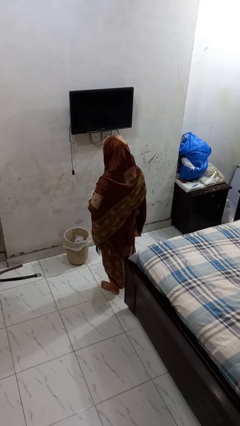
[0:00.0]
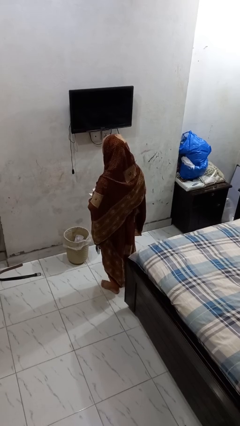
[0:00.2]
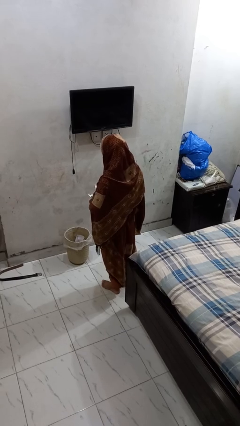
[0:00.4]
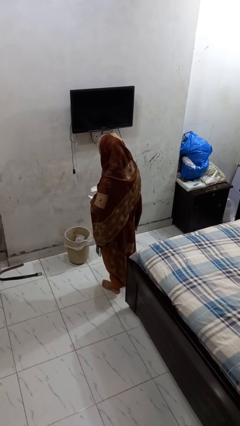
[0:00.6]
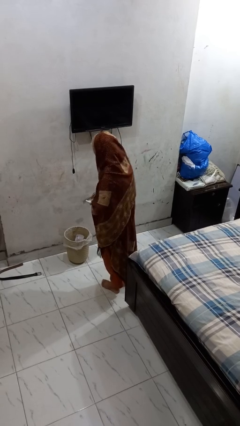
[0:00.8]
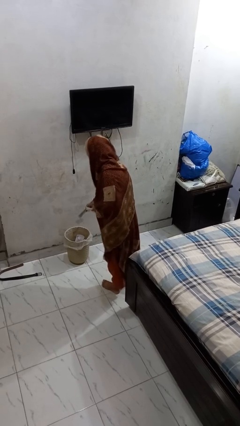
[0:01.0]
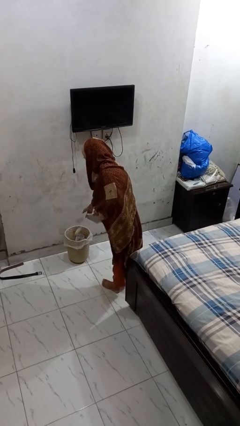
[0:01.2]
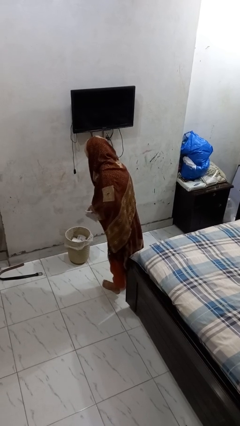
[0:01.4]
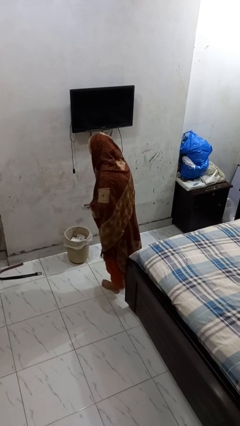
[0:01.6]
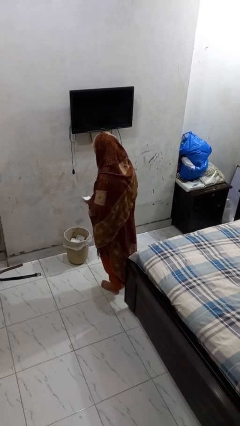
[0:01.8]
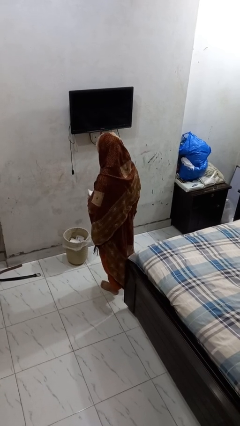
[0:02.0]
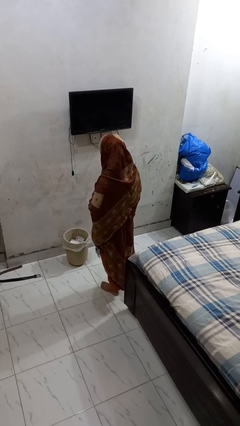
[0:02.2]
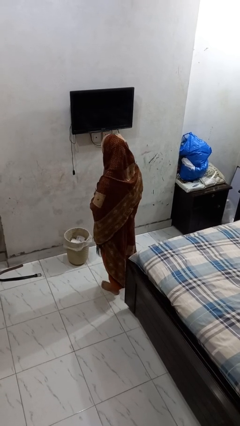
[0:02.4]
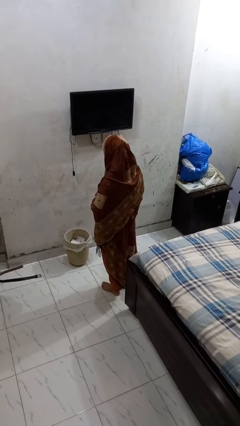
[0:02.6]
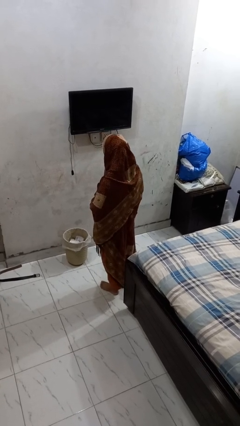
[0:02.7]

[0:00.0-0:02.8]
person discards trash

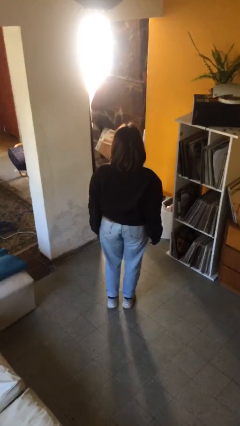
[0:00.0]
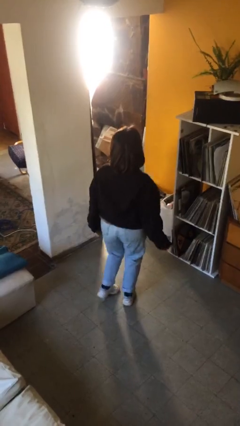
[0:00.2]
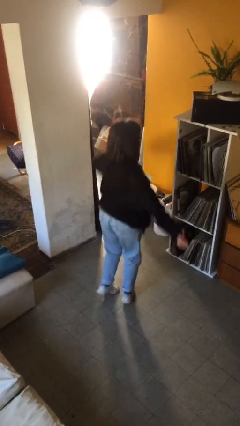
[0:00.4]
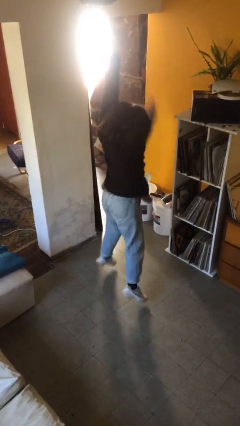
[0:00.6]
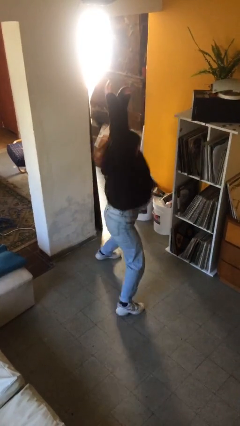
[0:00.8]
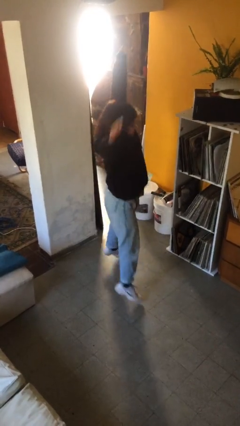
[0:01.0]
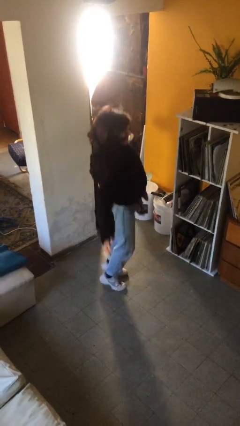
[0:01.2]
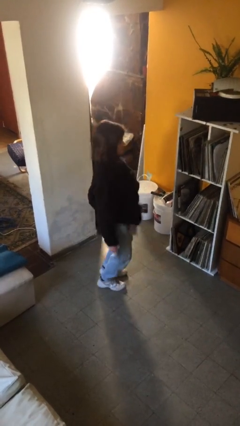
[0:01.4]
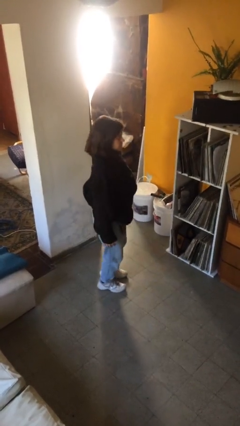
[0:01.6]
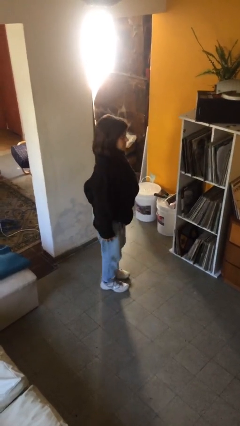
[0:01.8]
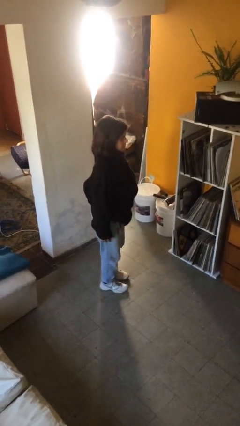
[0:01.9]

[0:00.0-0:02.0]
person exercises with jumping jacks

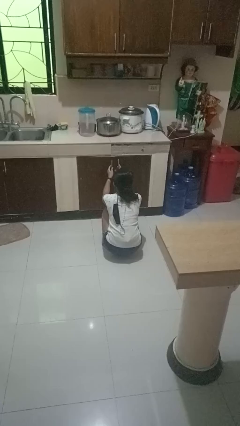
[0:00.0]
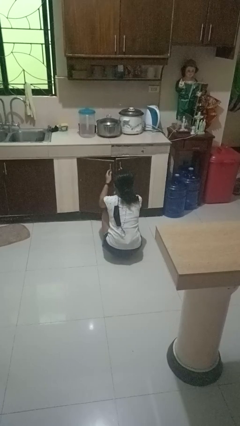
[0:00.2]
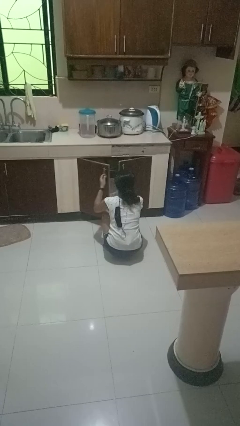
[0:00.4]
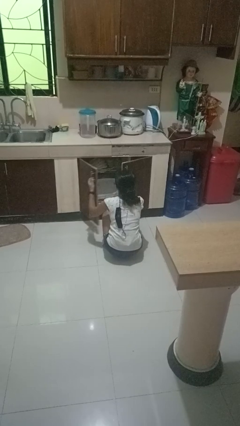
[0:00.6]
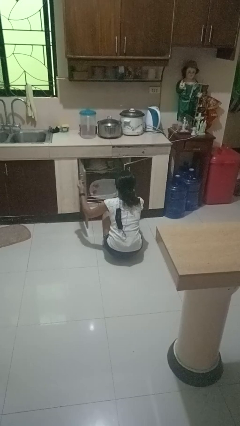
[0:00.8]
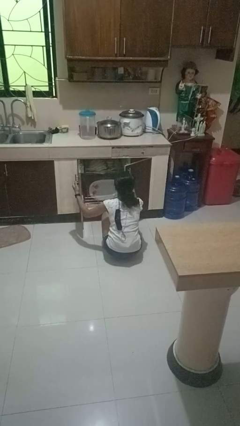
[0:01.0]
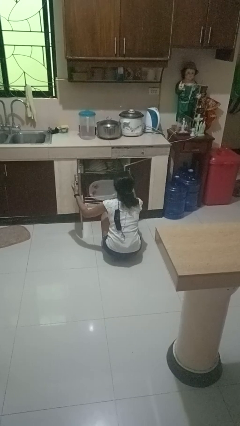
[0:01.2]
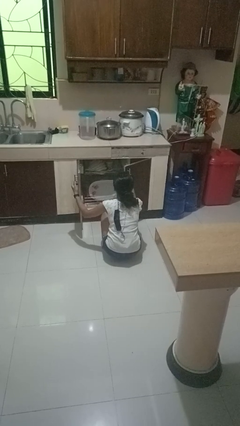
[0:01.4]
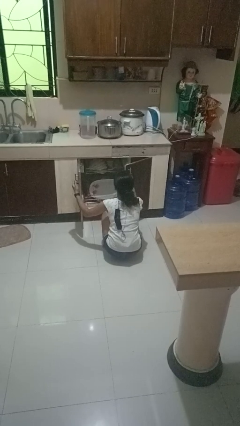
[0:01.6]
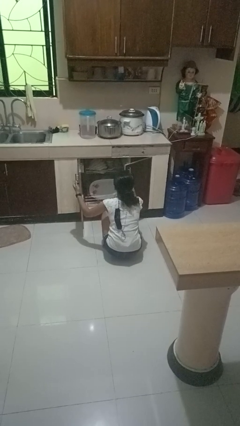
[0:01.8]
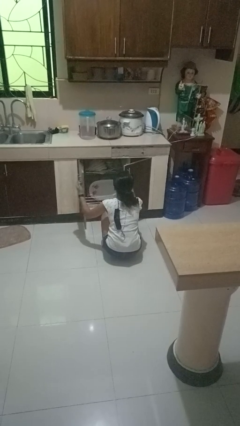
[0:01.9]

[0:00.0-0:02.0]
person opens dishwasher

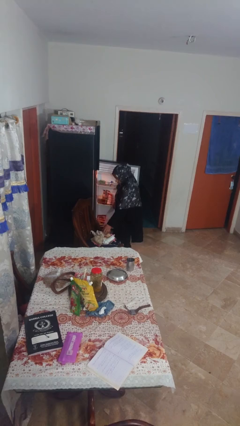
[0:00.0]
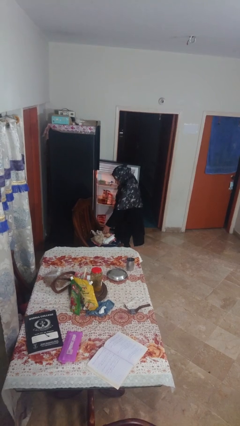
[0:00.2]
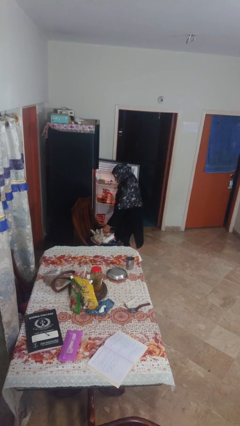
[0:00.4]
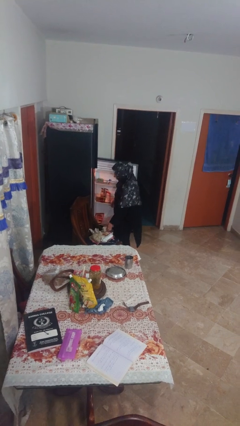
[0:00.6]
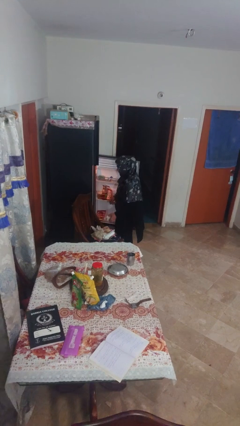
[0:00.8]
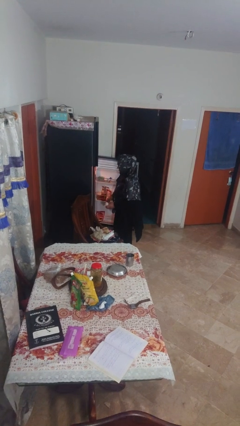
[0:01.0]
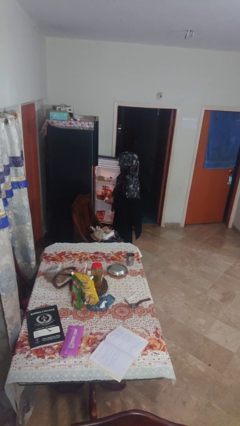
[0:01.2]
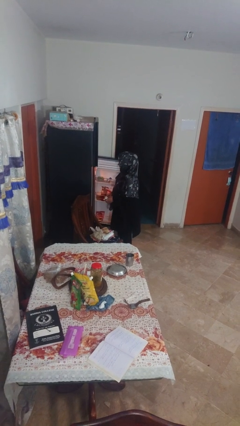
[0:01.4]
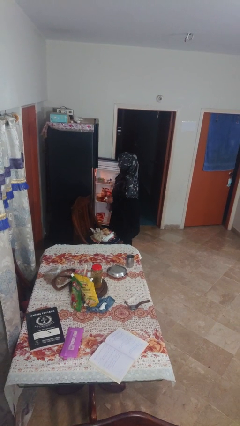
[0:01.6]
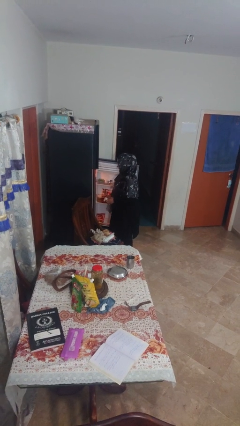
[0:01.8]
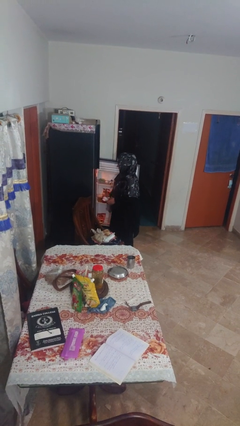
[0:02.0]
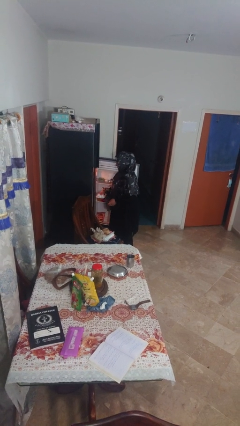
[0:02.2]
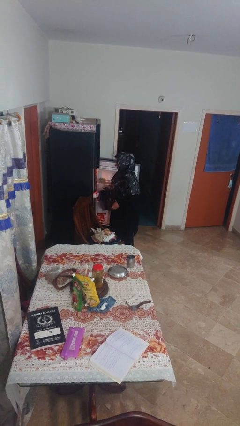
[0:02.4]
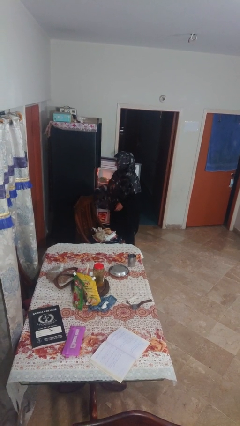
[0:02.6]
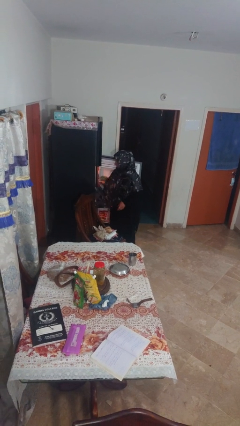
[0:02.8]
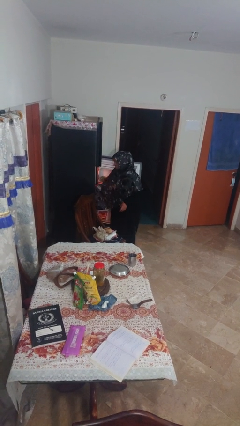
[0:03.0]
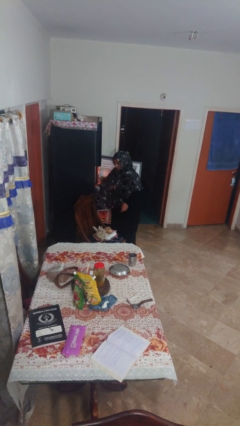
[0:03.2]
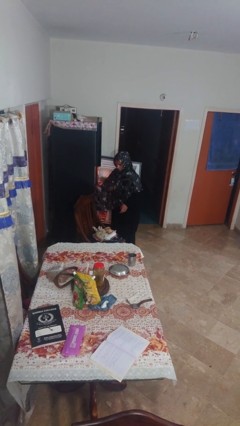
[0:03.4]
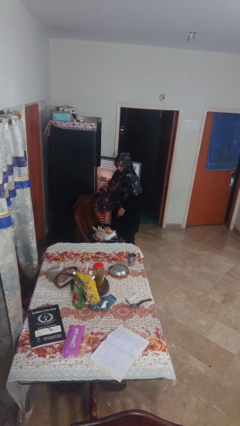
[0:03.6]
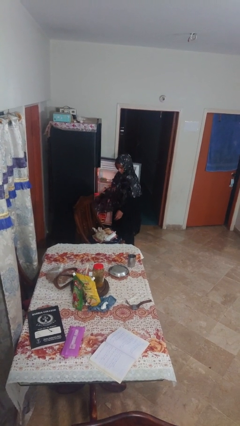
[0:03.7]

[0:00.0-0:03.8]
person loads groceries into refrigerator

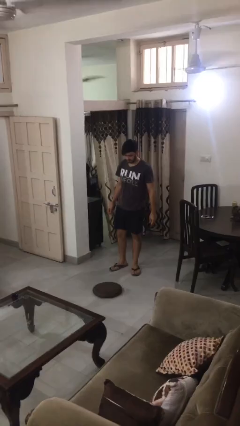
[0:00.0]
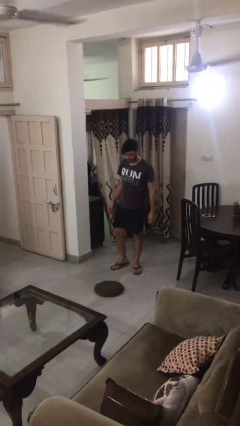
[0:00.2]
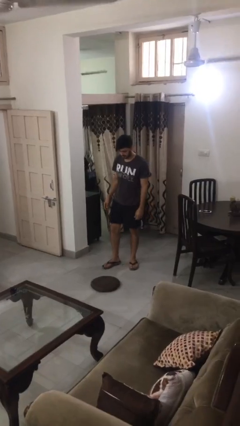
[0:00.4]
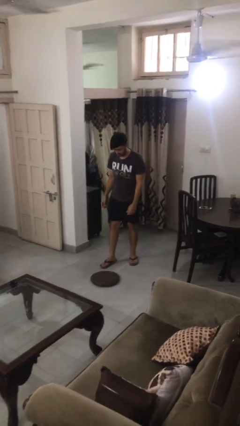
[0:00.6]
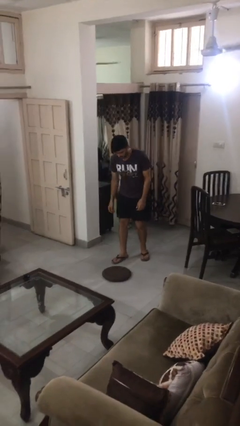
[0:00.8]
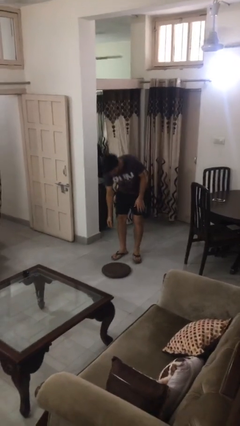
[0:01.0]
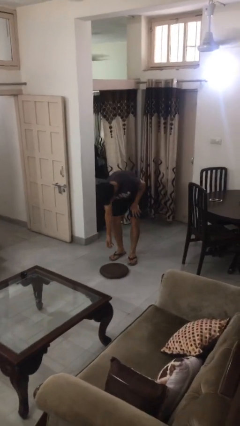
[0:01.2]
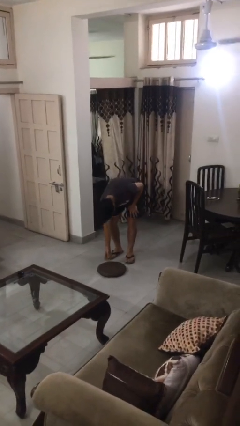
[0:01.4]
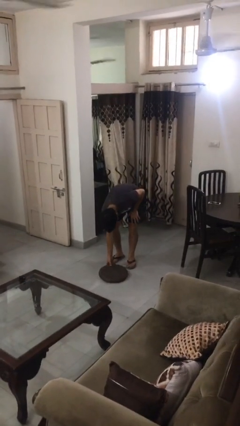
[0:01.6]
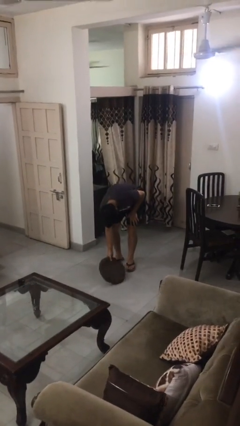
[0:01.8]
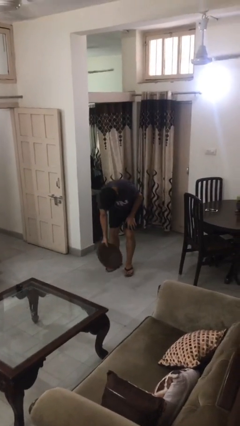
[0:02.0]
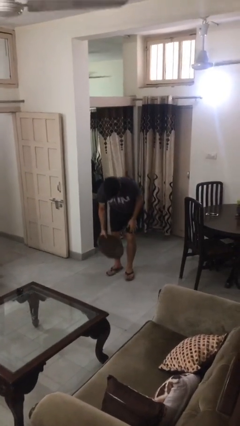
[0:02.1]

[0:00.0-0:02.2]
person picks up object from floor

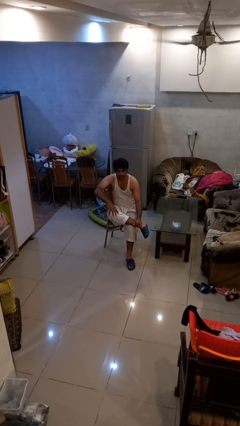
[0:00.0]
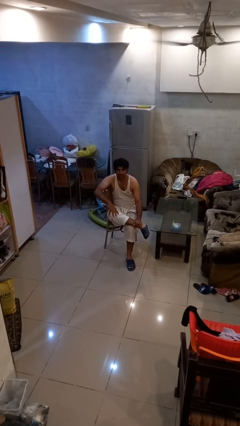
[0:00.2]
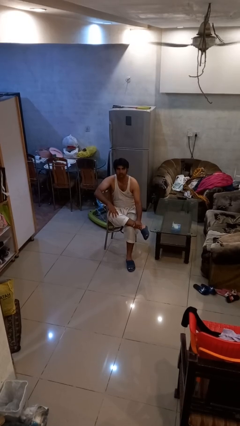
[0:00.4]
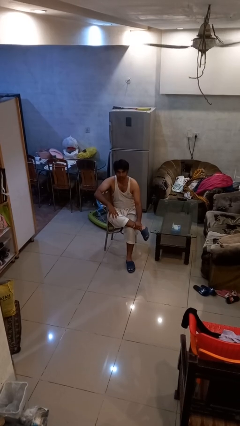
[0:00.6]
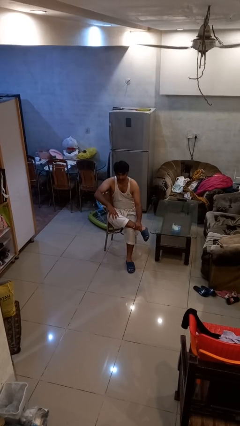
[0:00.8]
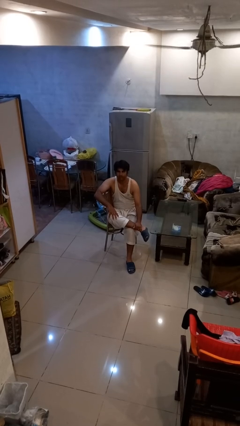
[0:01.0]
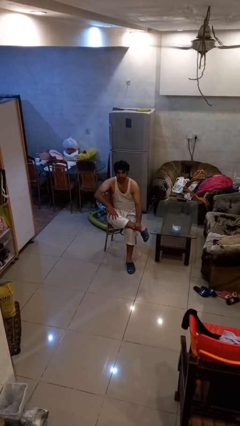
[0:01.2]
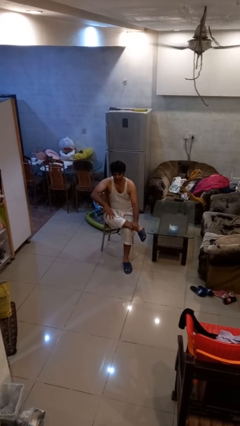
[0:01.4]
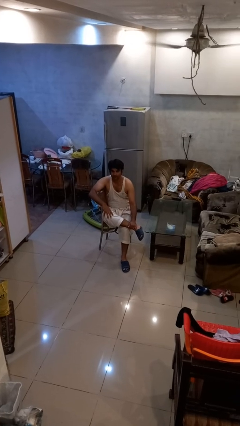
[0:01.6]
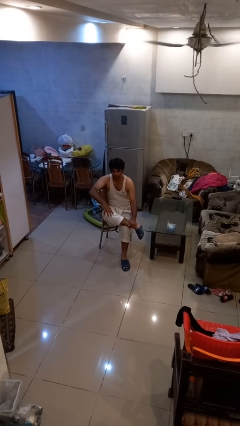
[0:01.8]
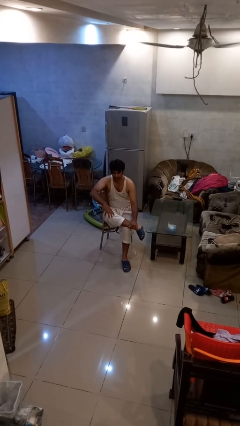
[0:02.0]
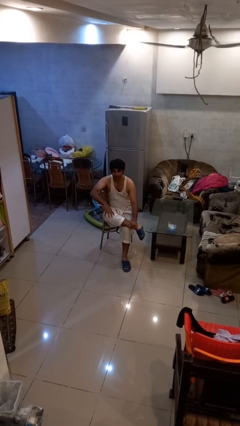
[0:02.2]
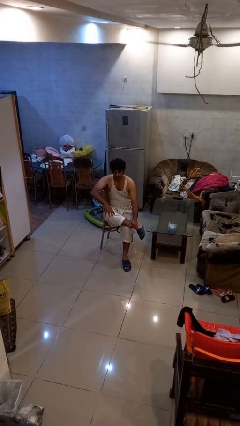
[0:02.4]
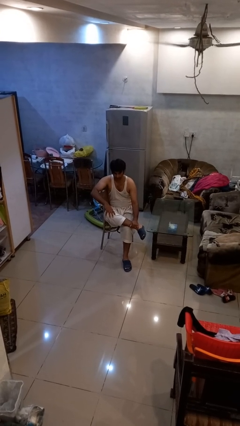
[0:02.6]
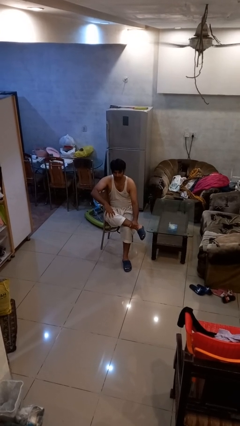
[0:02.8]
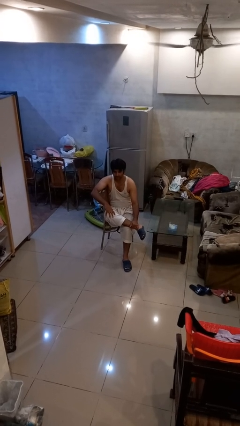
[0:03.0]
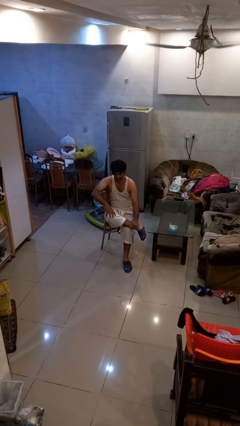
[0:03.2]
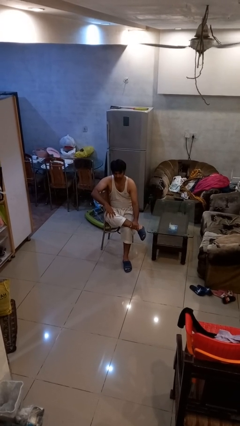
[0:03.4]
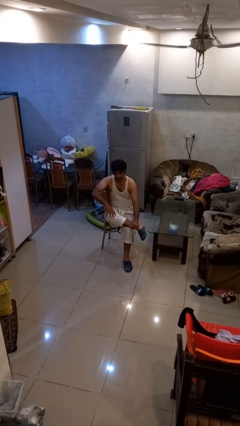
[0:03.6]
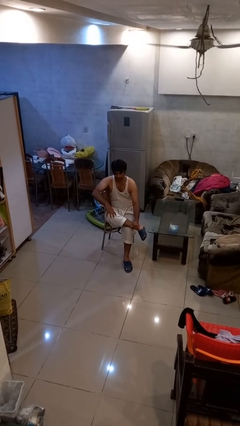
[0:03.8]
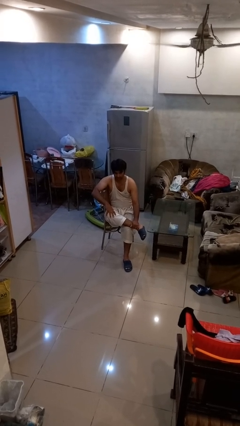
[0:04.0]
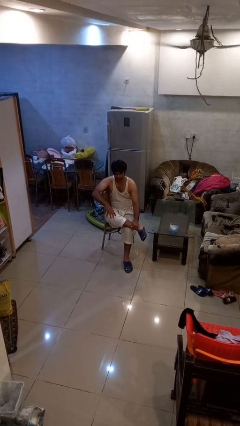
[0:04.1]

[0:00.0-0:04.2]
person nods head

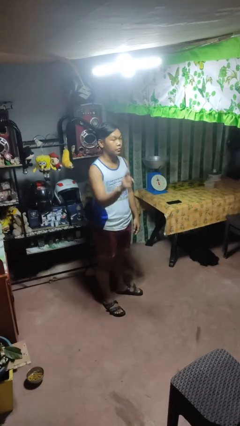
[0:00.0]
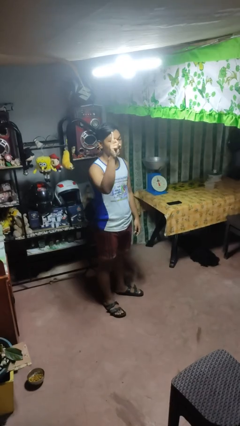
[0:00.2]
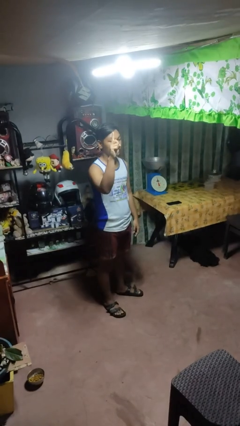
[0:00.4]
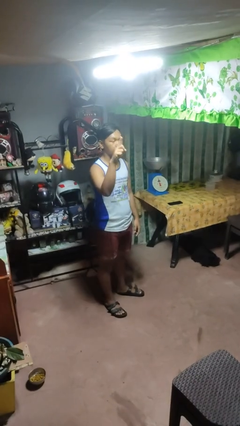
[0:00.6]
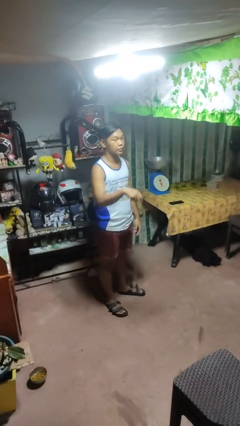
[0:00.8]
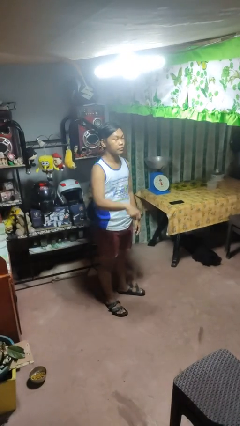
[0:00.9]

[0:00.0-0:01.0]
person gestures number one
